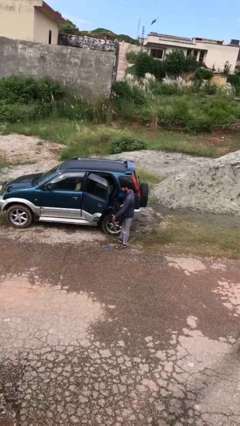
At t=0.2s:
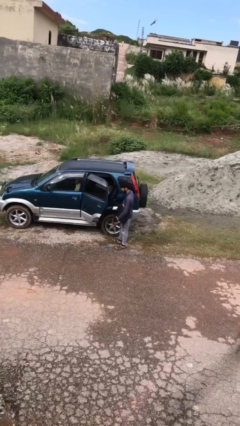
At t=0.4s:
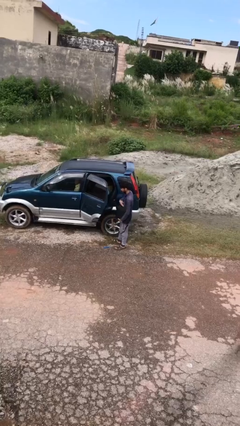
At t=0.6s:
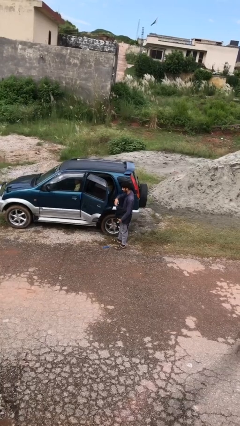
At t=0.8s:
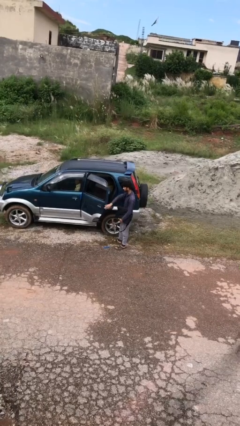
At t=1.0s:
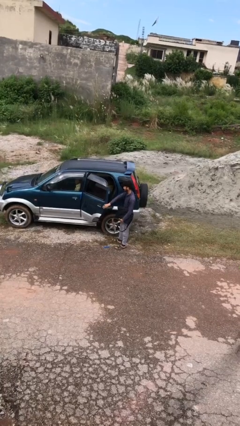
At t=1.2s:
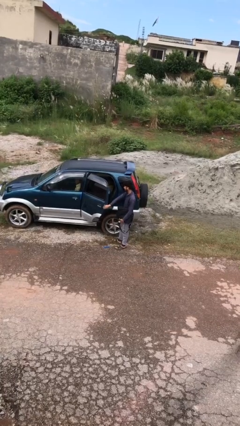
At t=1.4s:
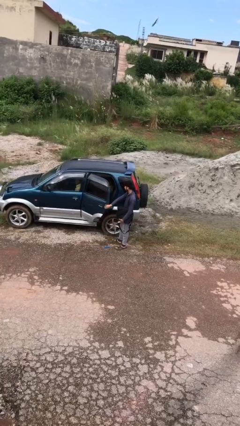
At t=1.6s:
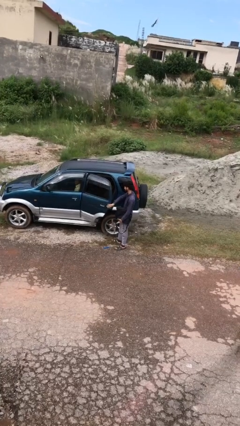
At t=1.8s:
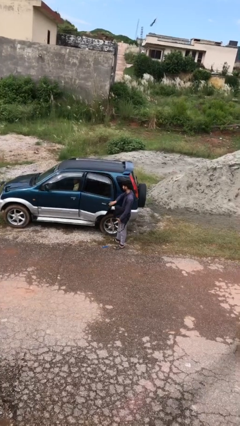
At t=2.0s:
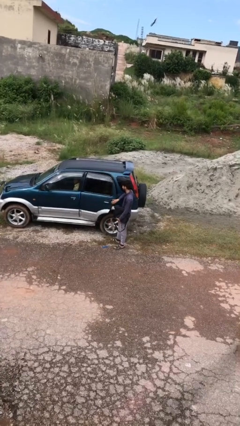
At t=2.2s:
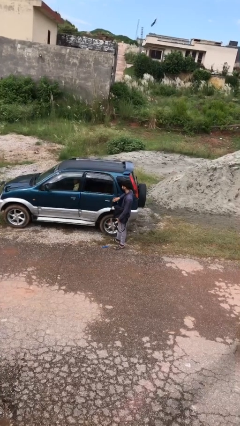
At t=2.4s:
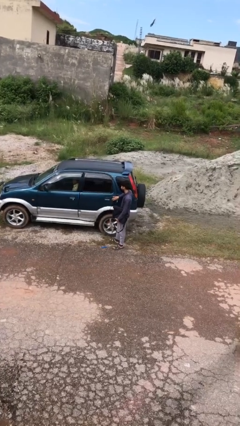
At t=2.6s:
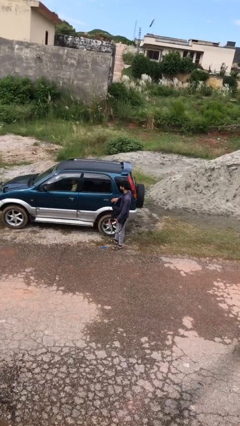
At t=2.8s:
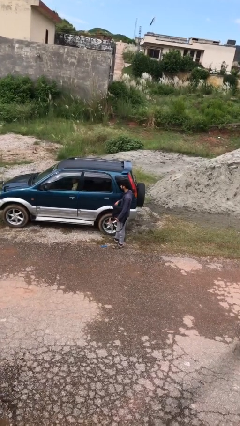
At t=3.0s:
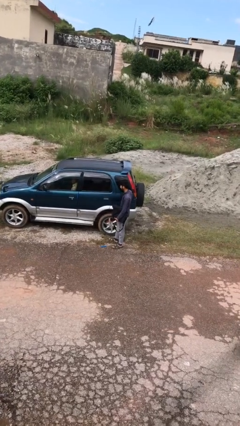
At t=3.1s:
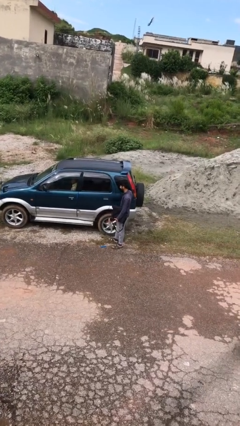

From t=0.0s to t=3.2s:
person closes car door

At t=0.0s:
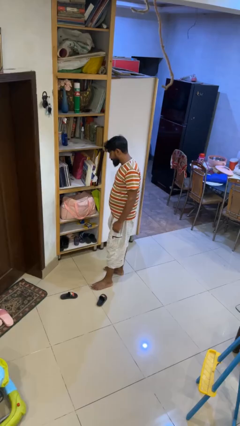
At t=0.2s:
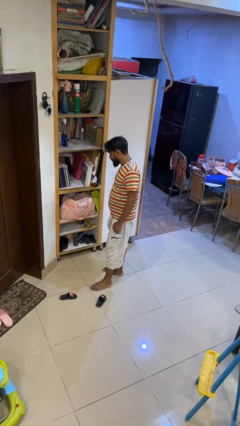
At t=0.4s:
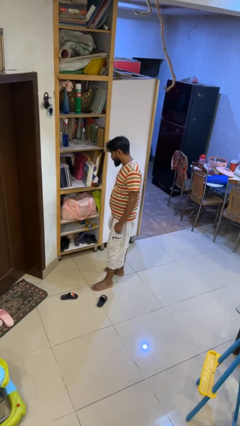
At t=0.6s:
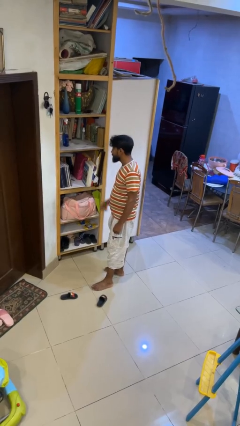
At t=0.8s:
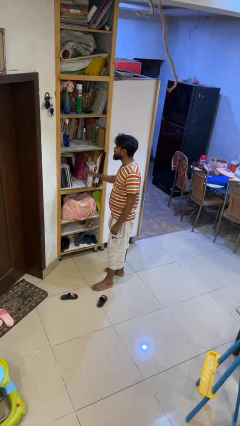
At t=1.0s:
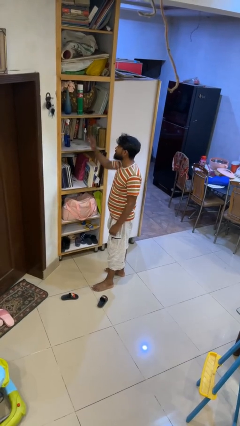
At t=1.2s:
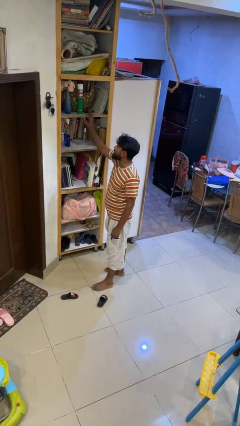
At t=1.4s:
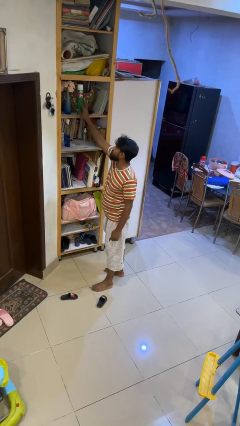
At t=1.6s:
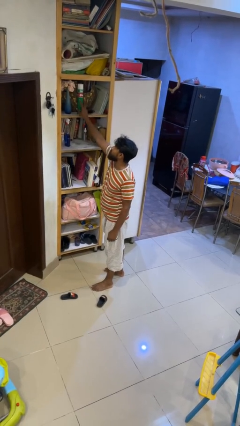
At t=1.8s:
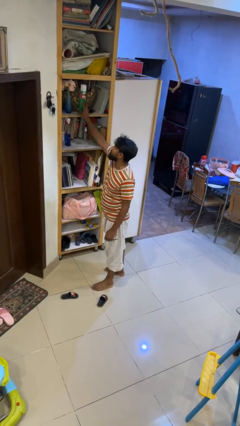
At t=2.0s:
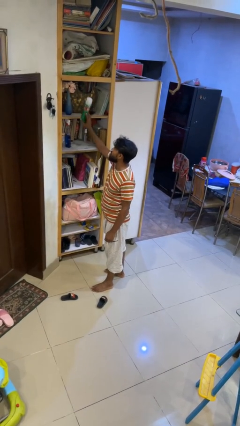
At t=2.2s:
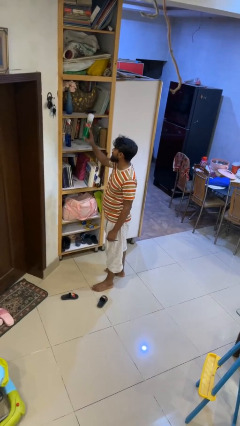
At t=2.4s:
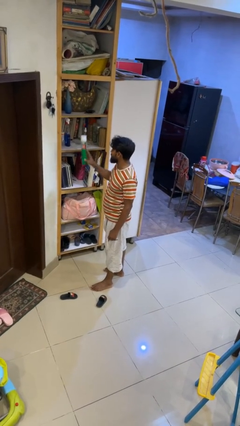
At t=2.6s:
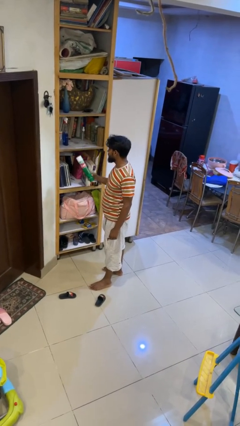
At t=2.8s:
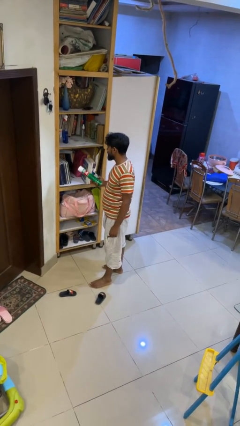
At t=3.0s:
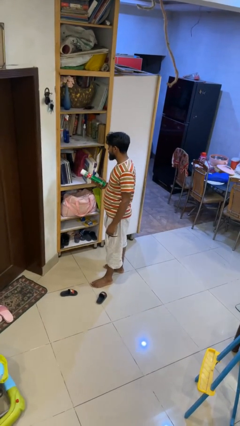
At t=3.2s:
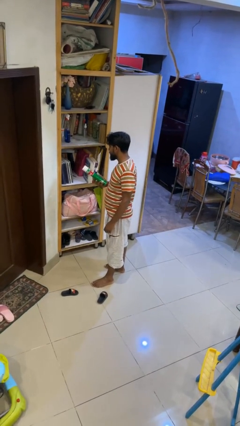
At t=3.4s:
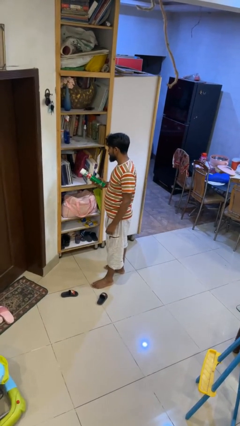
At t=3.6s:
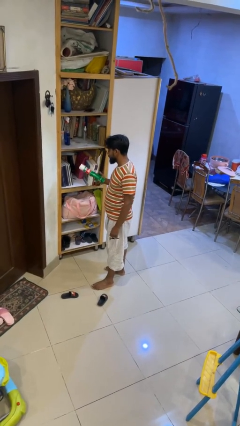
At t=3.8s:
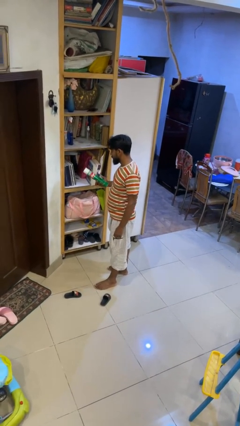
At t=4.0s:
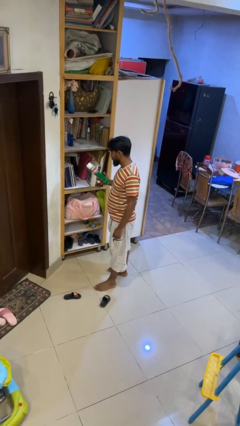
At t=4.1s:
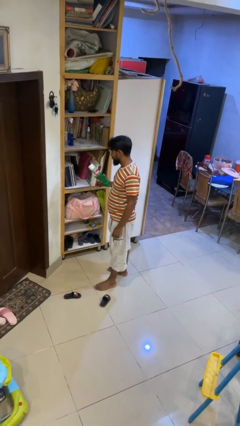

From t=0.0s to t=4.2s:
person picks up object from shelf

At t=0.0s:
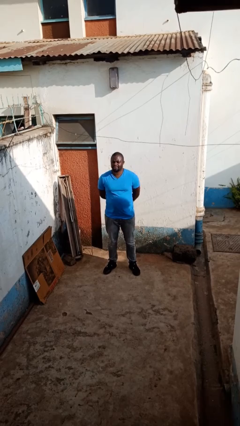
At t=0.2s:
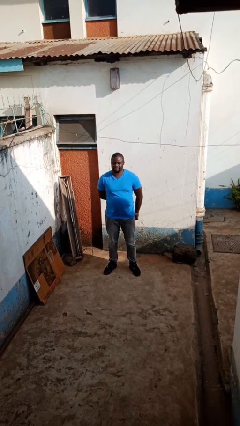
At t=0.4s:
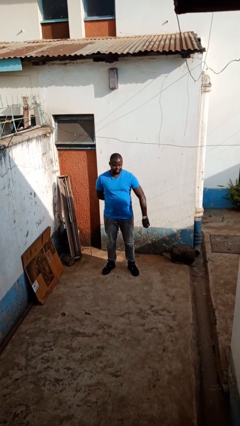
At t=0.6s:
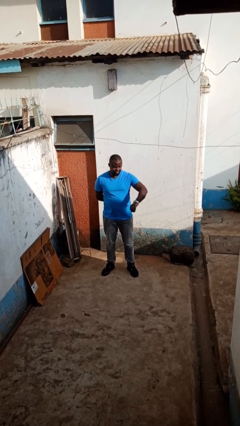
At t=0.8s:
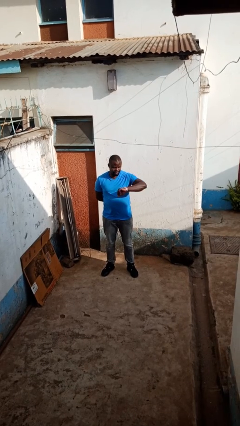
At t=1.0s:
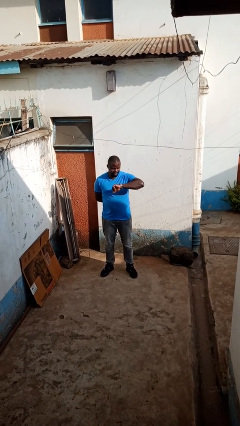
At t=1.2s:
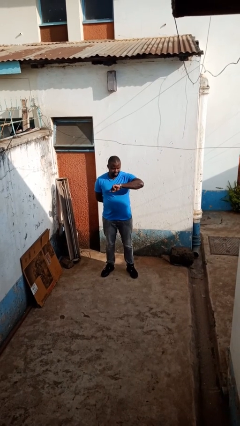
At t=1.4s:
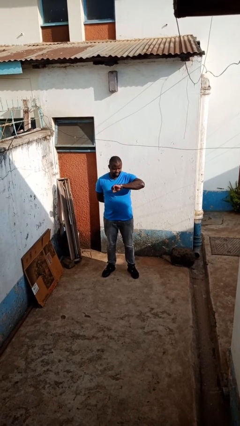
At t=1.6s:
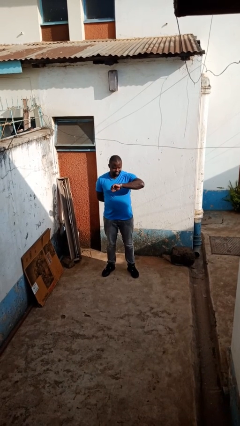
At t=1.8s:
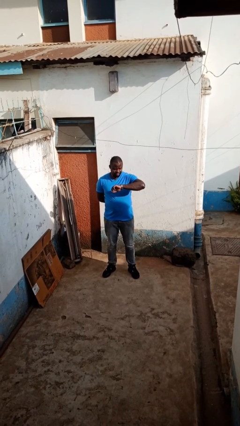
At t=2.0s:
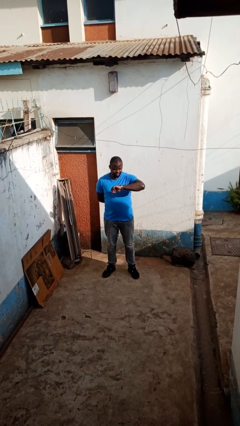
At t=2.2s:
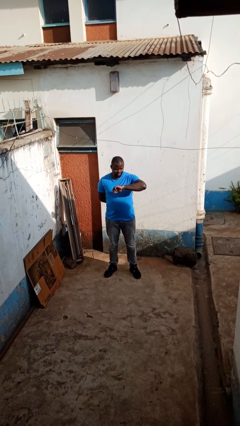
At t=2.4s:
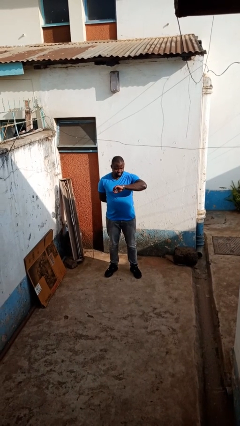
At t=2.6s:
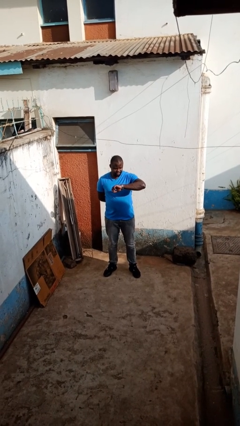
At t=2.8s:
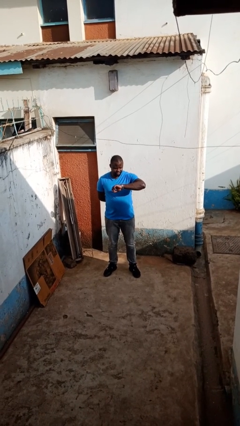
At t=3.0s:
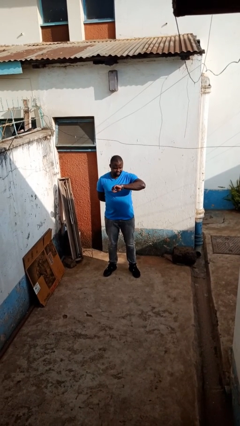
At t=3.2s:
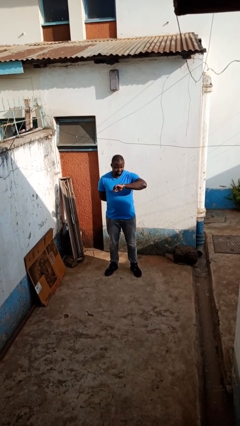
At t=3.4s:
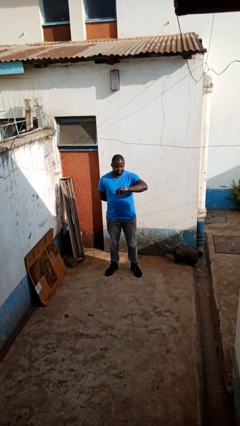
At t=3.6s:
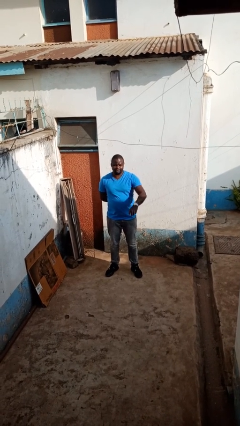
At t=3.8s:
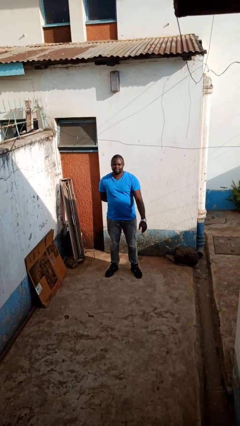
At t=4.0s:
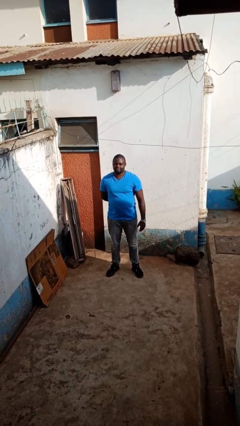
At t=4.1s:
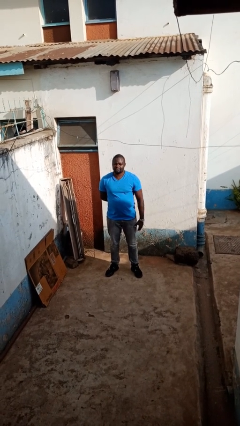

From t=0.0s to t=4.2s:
person looks at wristwatch

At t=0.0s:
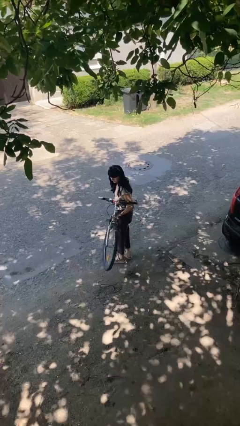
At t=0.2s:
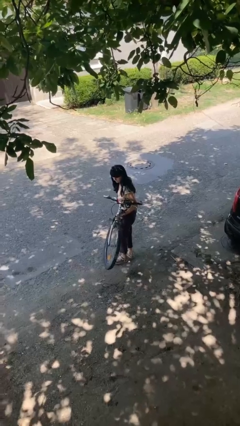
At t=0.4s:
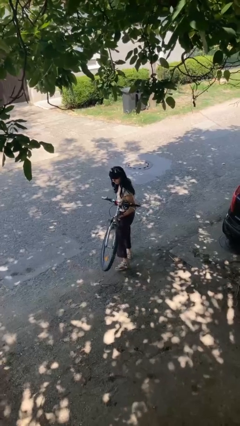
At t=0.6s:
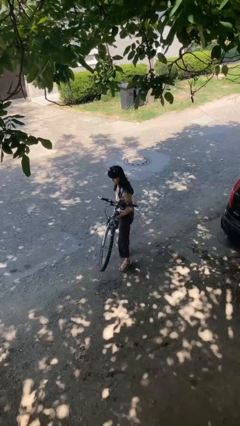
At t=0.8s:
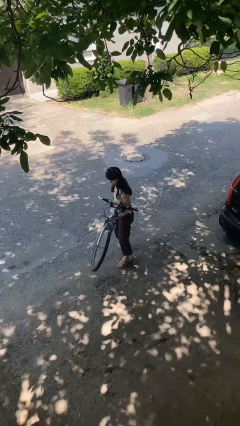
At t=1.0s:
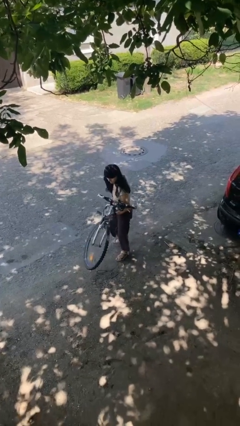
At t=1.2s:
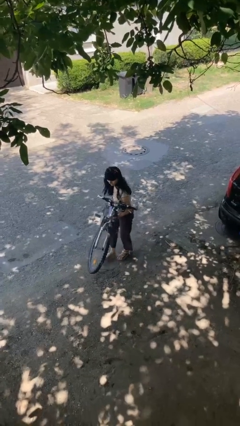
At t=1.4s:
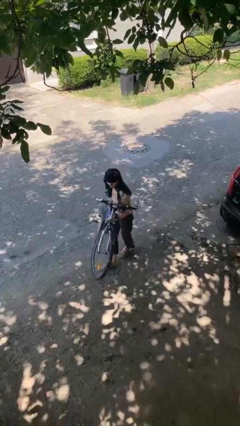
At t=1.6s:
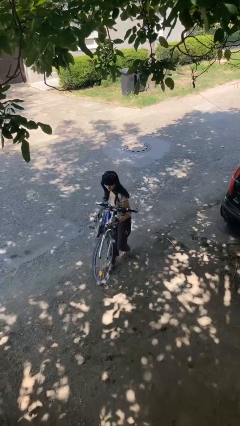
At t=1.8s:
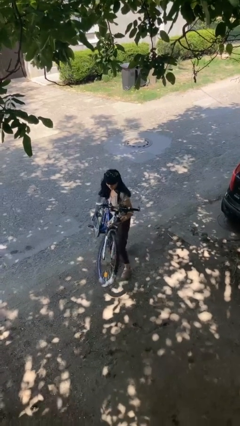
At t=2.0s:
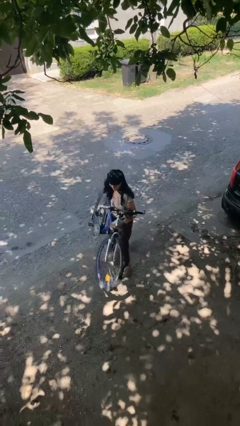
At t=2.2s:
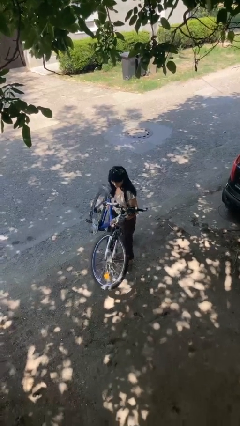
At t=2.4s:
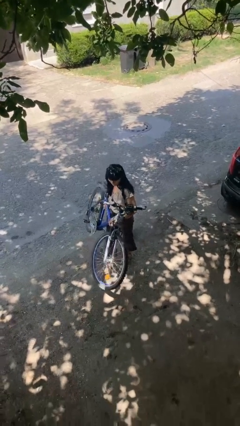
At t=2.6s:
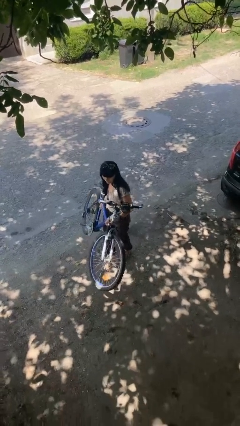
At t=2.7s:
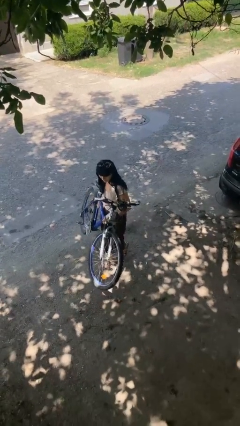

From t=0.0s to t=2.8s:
person carries bicycle

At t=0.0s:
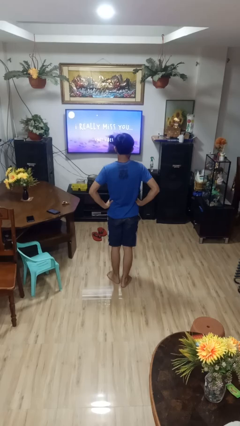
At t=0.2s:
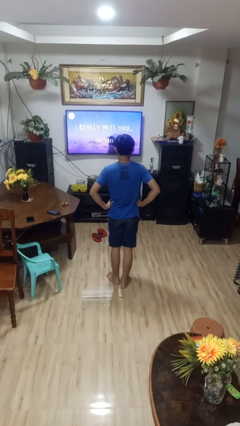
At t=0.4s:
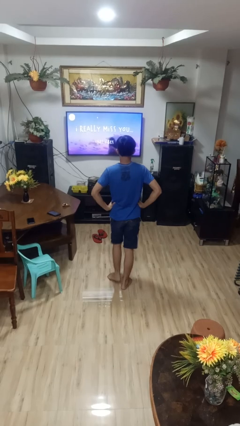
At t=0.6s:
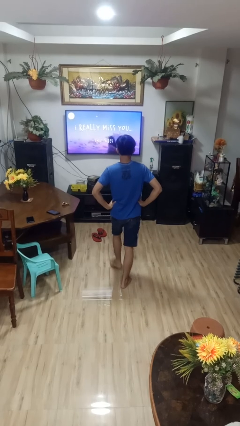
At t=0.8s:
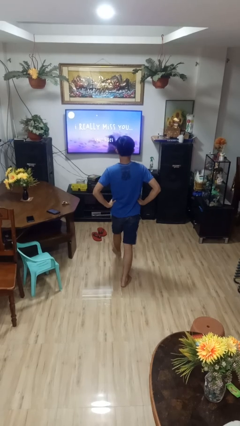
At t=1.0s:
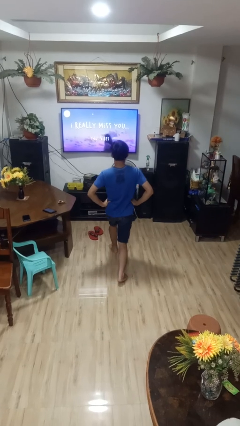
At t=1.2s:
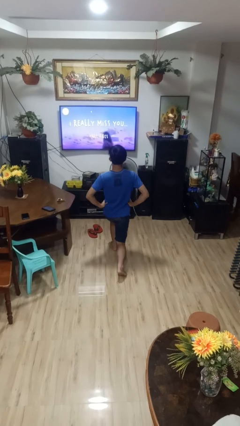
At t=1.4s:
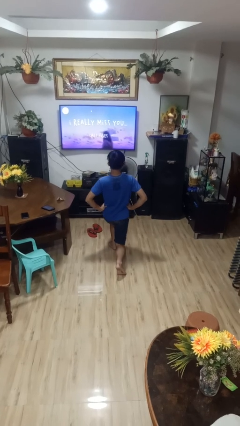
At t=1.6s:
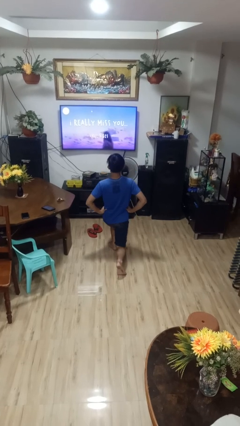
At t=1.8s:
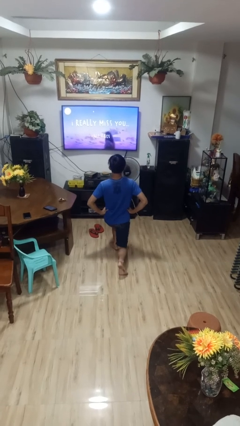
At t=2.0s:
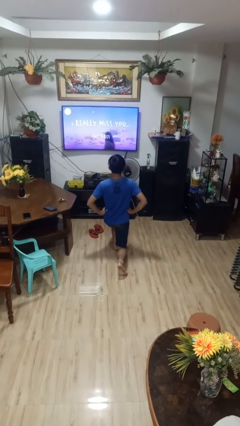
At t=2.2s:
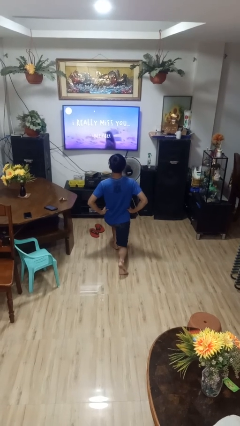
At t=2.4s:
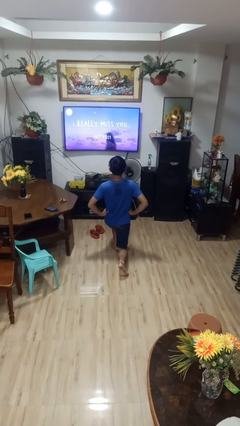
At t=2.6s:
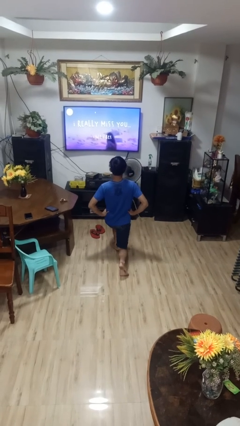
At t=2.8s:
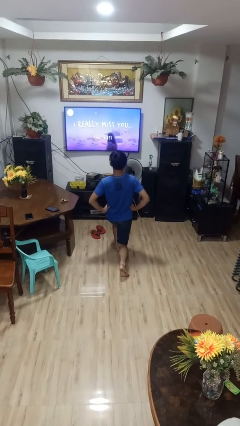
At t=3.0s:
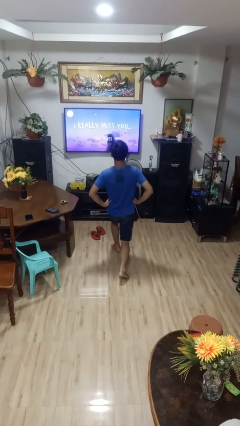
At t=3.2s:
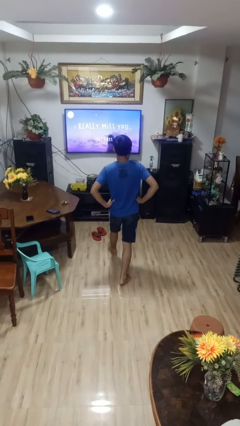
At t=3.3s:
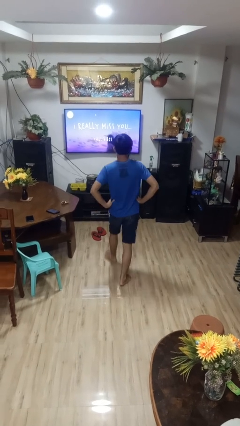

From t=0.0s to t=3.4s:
person exercises with lunges

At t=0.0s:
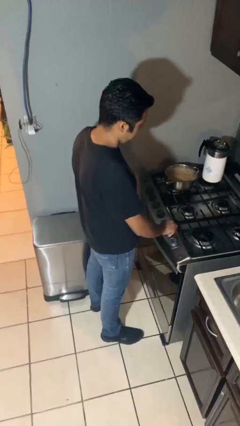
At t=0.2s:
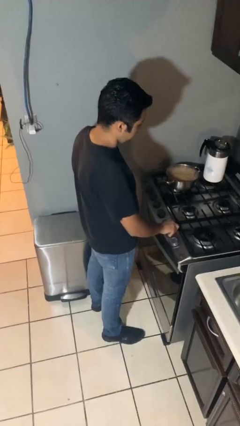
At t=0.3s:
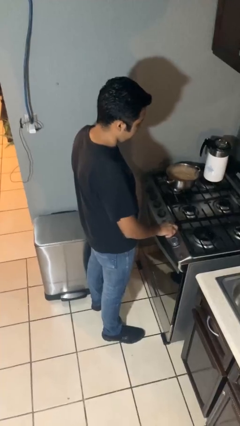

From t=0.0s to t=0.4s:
person turns off stovetop
